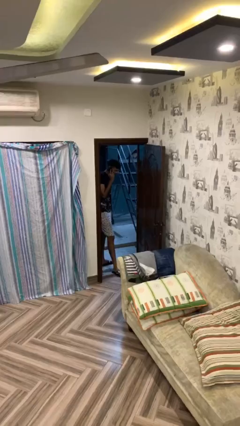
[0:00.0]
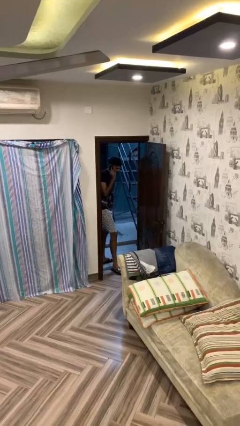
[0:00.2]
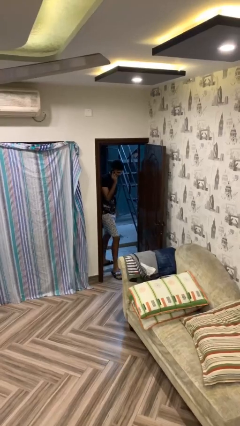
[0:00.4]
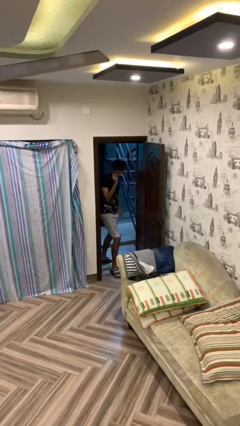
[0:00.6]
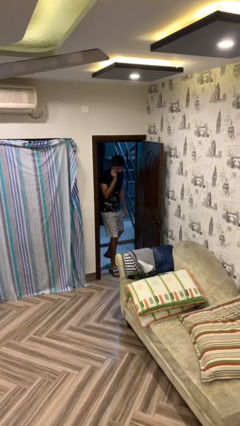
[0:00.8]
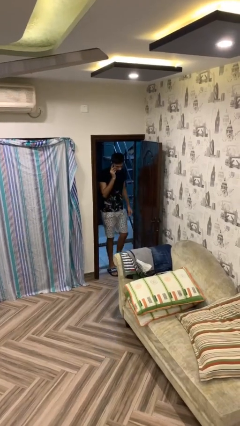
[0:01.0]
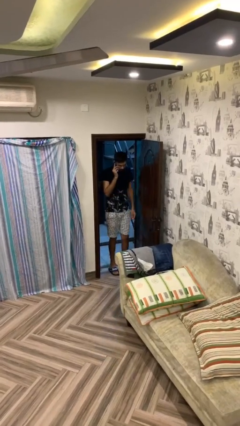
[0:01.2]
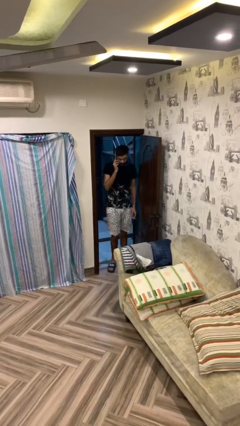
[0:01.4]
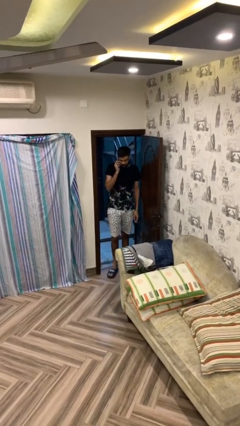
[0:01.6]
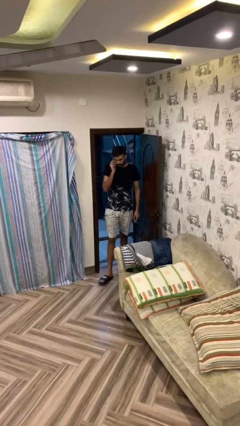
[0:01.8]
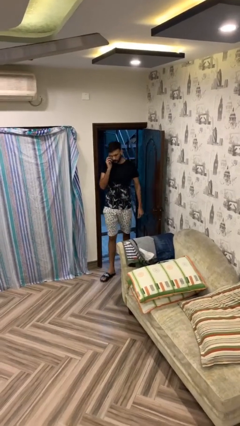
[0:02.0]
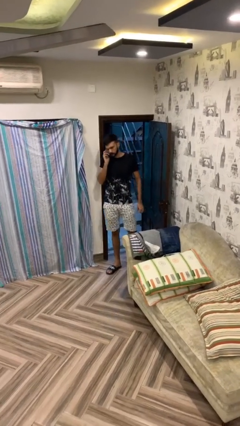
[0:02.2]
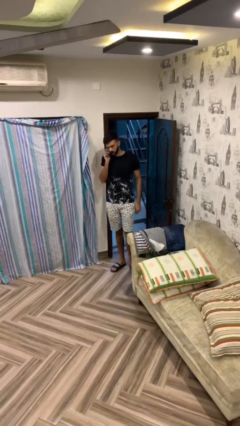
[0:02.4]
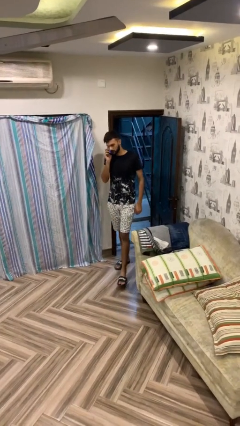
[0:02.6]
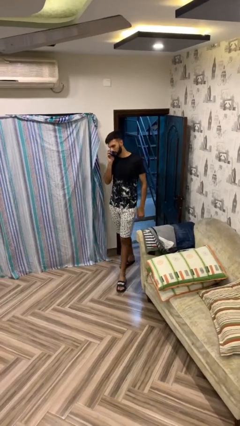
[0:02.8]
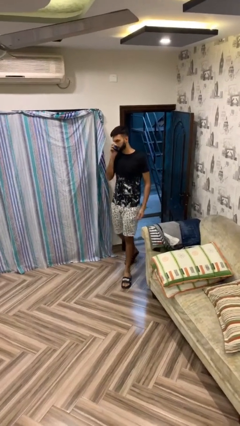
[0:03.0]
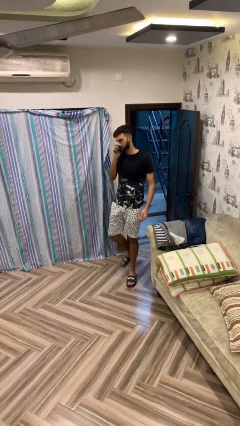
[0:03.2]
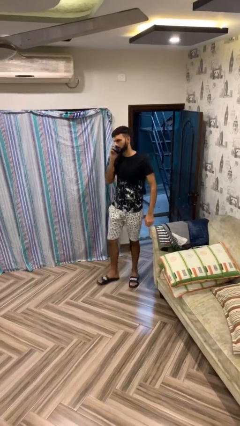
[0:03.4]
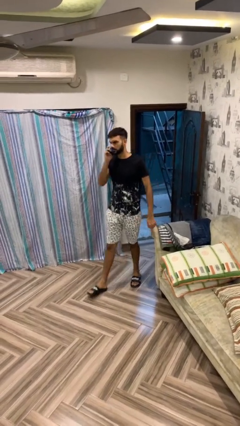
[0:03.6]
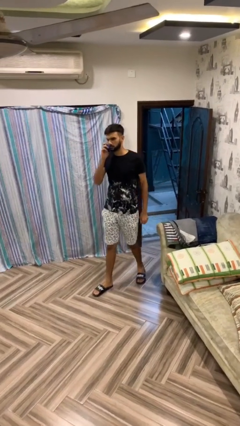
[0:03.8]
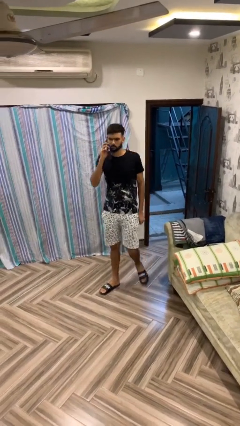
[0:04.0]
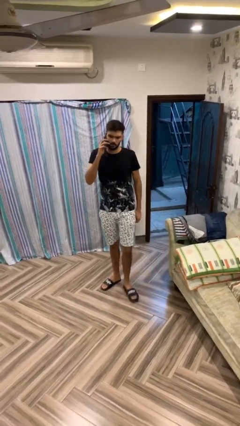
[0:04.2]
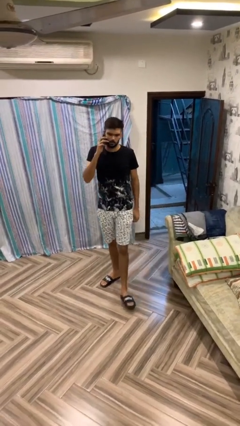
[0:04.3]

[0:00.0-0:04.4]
person enters scene through structure

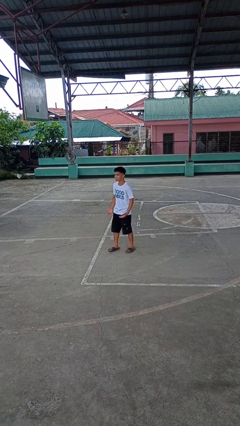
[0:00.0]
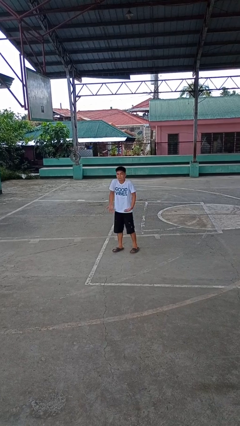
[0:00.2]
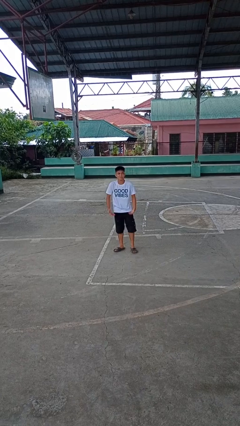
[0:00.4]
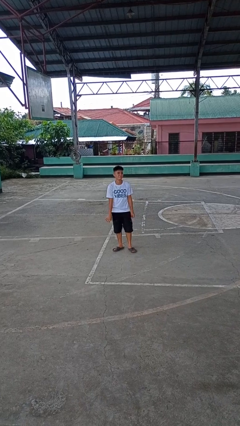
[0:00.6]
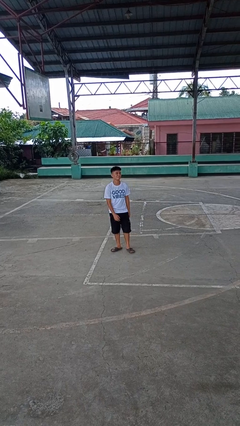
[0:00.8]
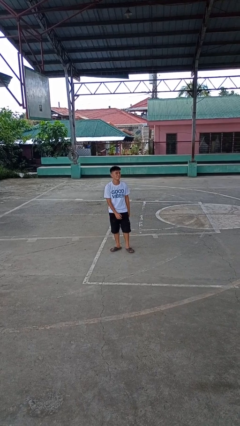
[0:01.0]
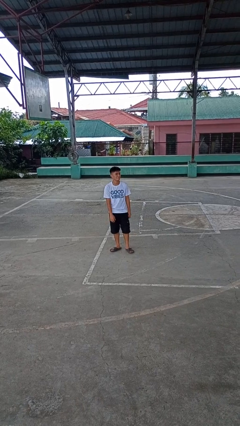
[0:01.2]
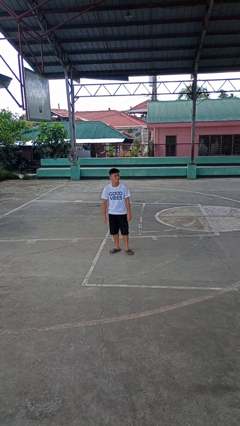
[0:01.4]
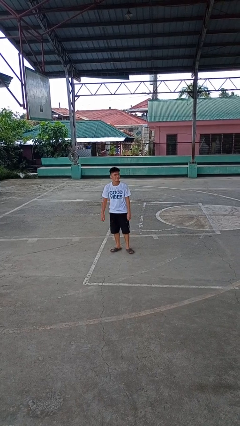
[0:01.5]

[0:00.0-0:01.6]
person shrugs

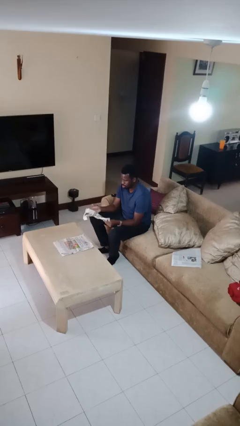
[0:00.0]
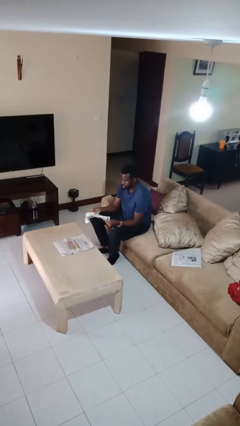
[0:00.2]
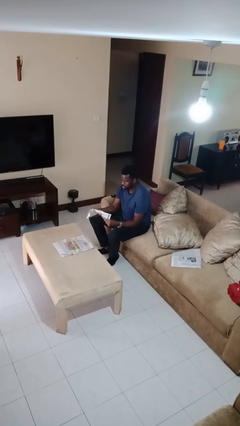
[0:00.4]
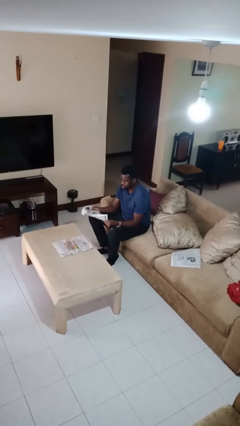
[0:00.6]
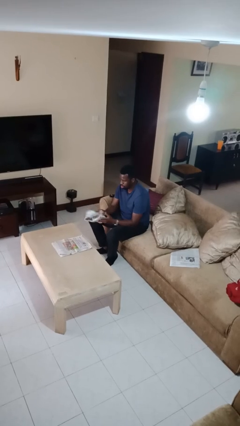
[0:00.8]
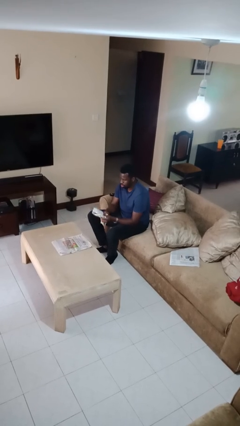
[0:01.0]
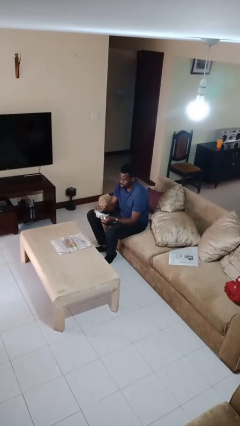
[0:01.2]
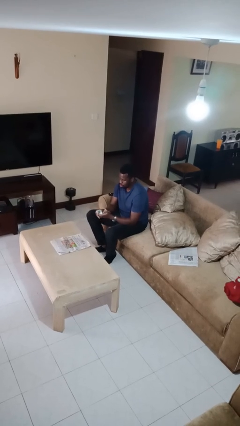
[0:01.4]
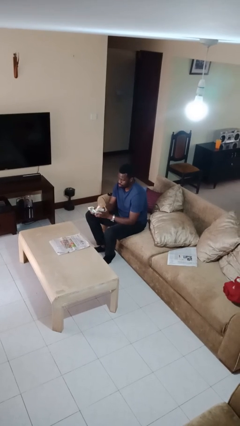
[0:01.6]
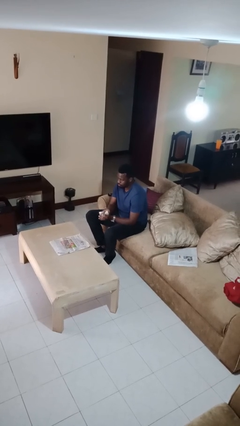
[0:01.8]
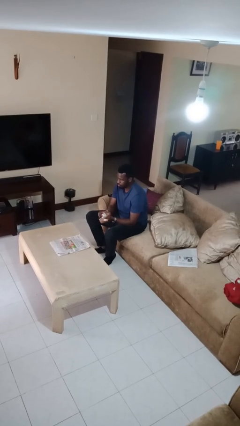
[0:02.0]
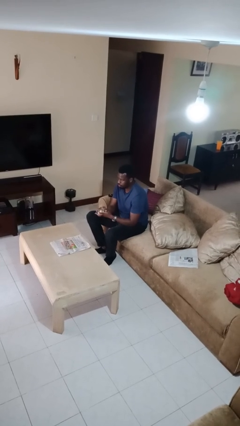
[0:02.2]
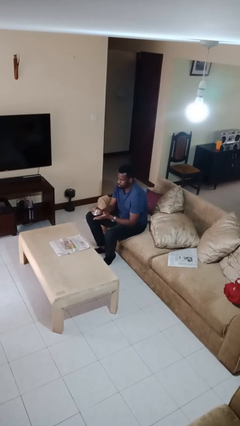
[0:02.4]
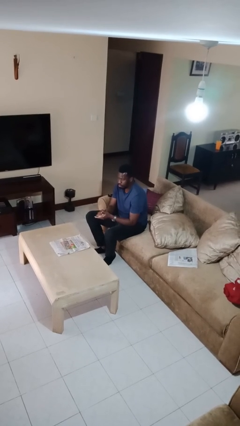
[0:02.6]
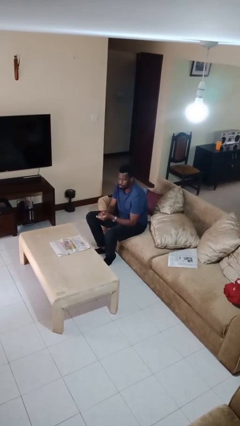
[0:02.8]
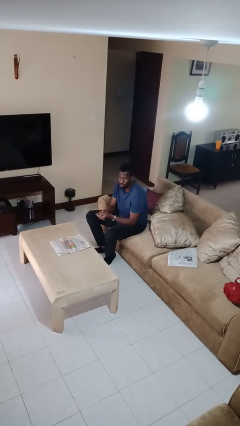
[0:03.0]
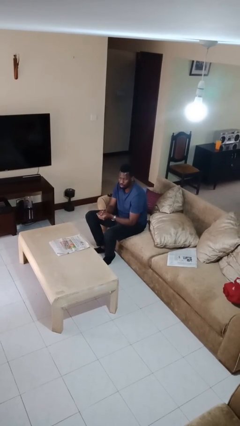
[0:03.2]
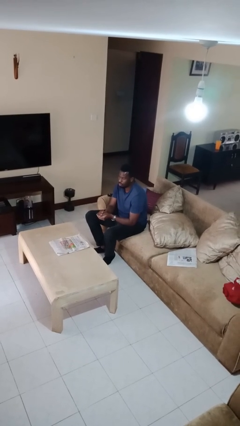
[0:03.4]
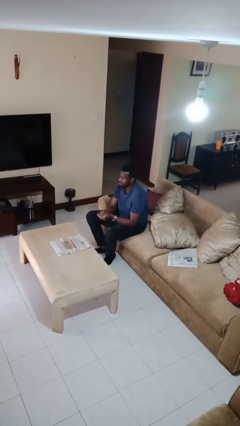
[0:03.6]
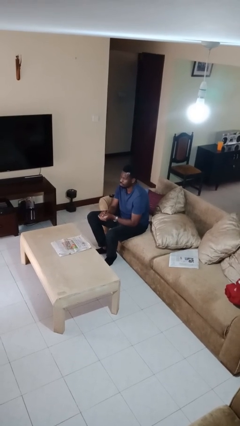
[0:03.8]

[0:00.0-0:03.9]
person crumples paper

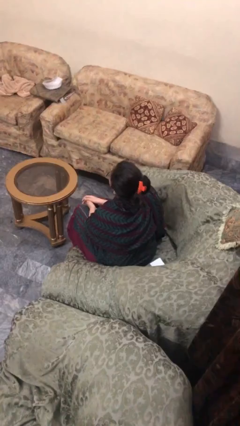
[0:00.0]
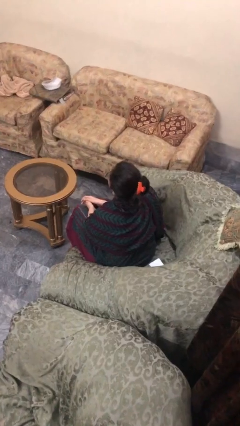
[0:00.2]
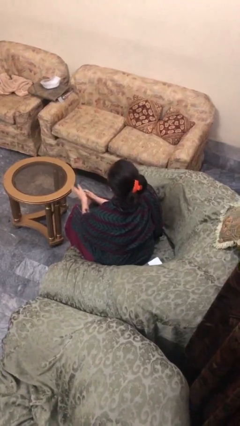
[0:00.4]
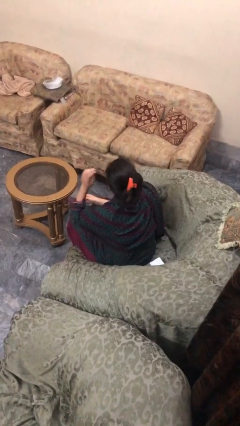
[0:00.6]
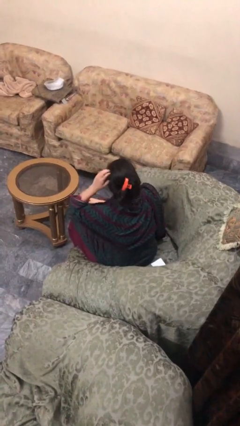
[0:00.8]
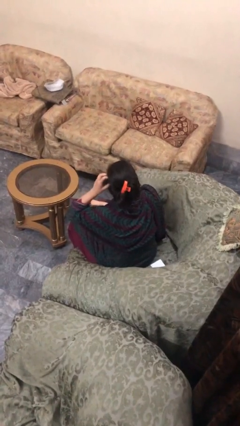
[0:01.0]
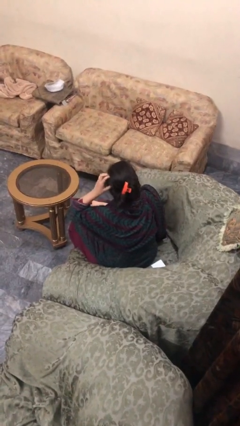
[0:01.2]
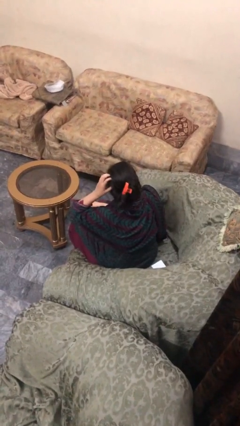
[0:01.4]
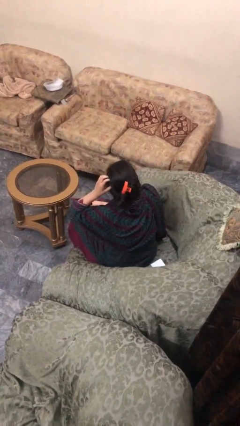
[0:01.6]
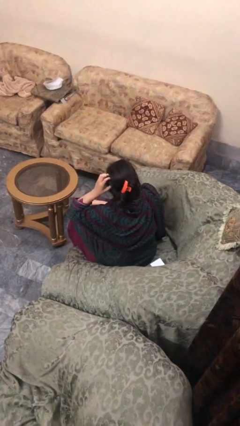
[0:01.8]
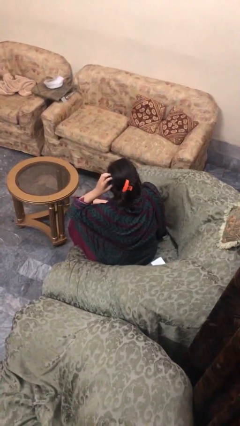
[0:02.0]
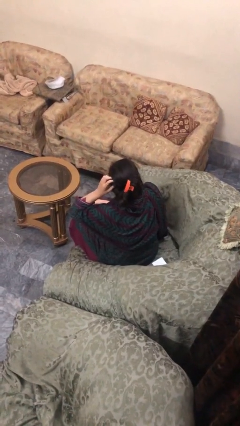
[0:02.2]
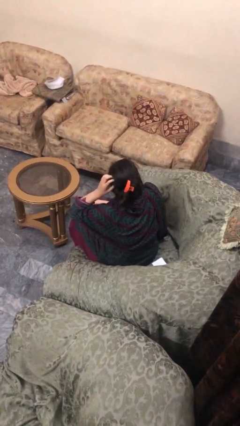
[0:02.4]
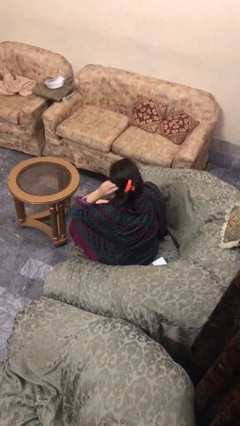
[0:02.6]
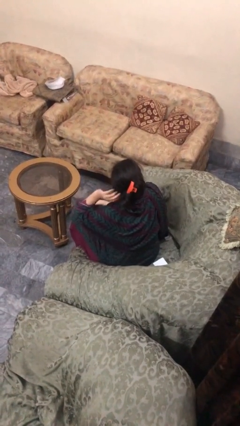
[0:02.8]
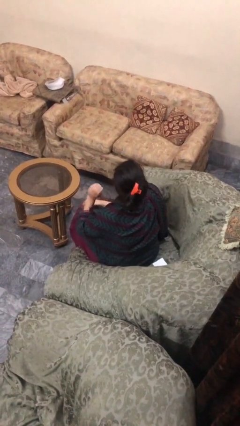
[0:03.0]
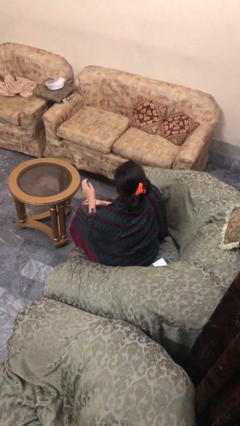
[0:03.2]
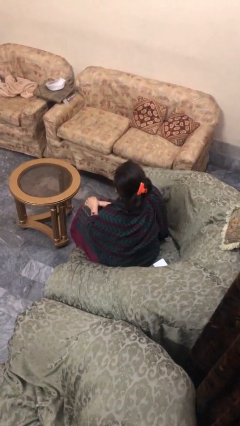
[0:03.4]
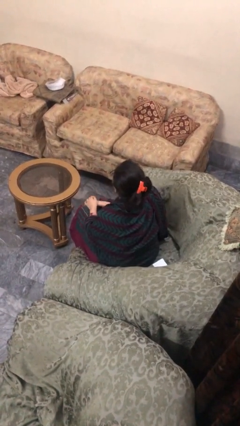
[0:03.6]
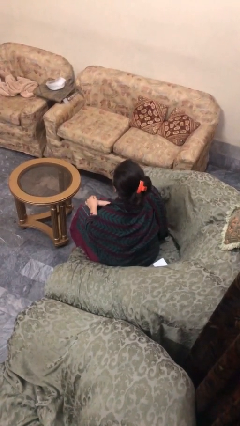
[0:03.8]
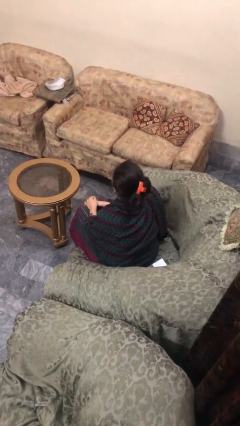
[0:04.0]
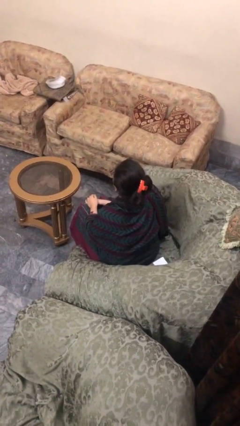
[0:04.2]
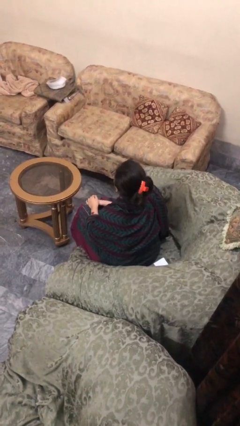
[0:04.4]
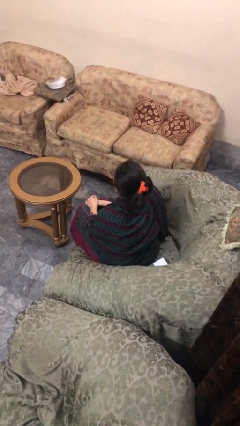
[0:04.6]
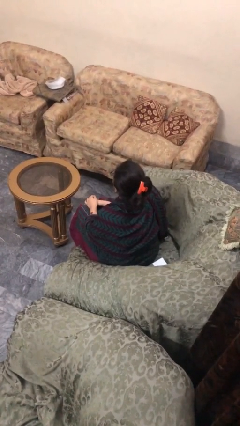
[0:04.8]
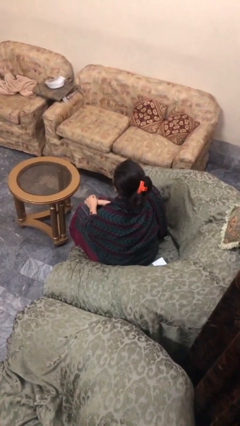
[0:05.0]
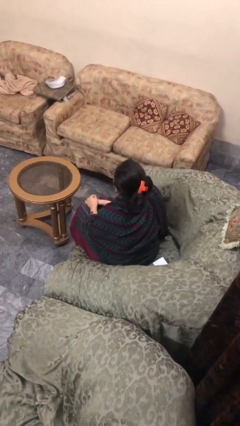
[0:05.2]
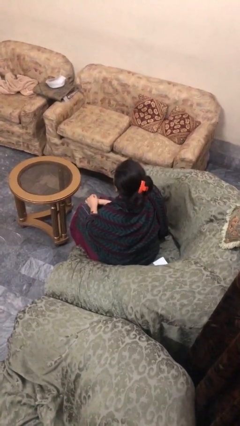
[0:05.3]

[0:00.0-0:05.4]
person strokes hair

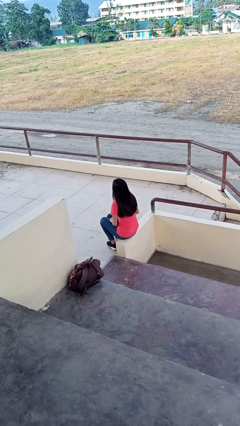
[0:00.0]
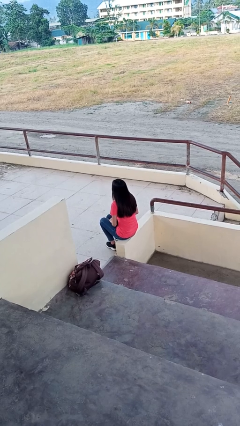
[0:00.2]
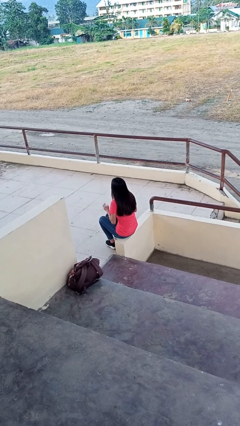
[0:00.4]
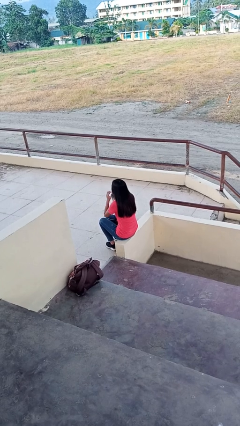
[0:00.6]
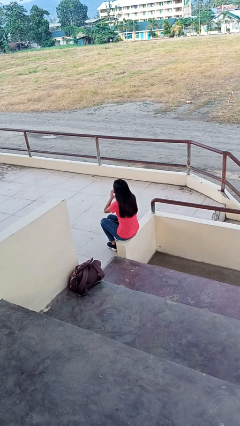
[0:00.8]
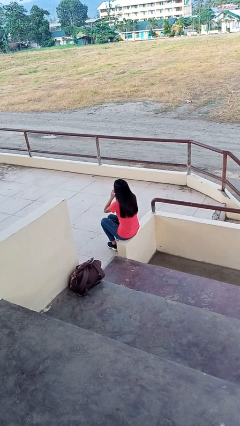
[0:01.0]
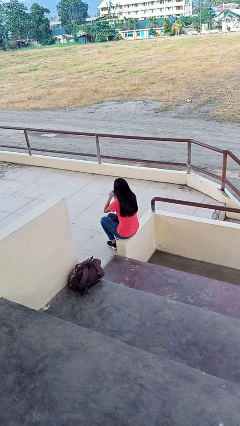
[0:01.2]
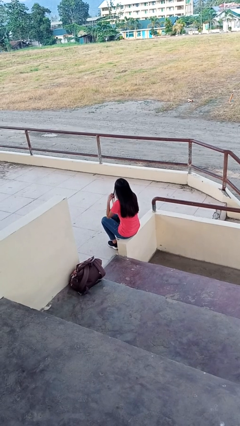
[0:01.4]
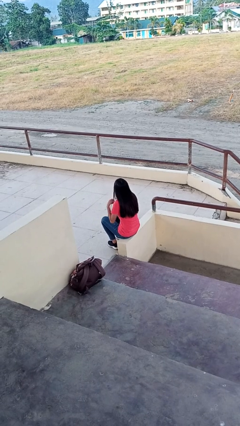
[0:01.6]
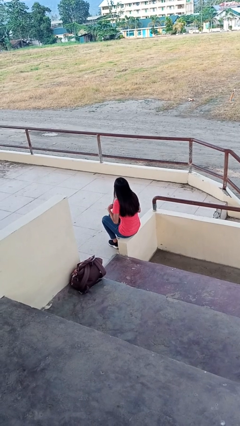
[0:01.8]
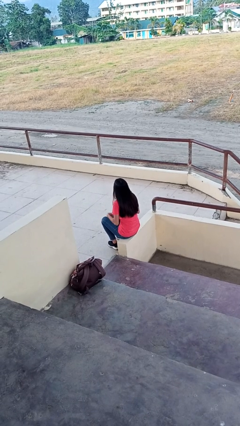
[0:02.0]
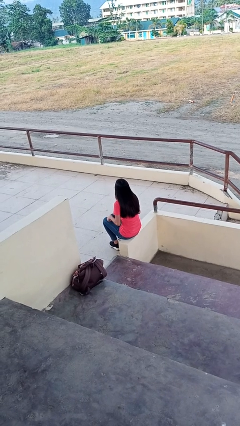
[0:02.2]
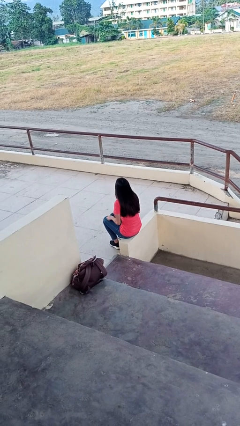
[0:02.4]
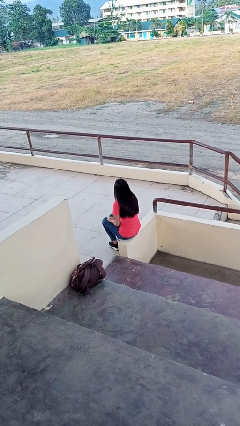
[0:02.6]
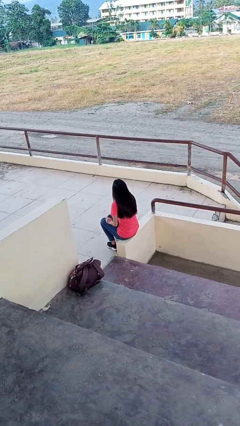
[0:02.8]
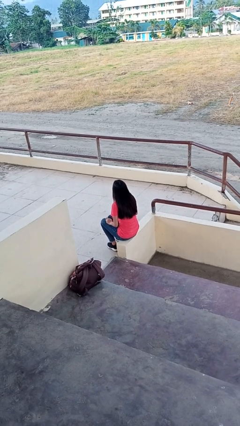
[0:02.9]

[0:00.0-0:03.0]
person takes off headphones
